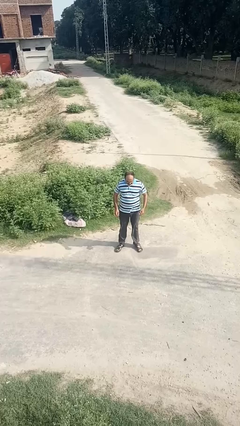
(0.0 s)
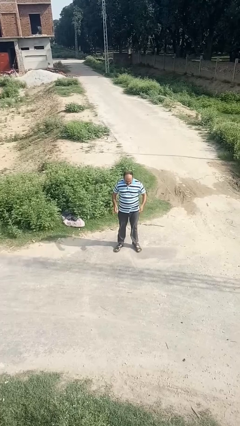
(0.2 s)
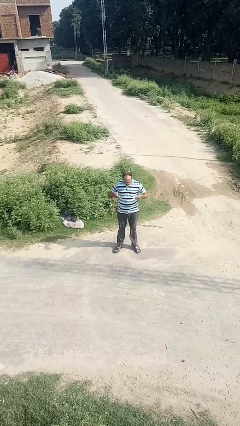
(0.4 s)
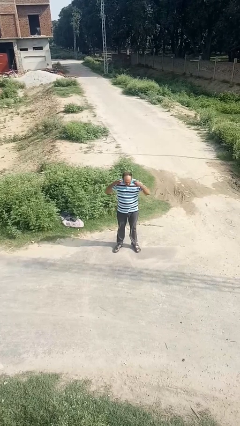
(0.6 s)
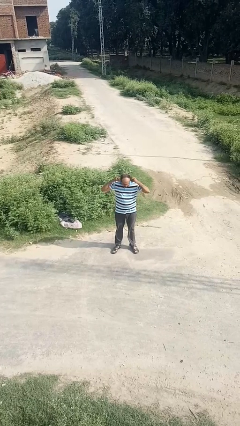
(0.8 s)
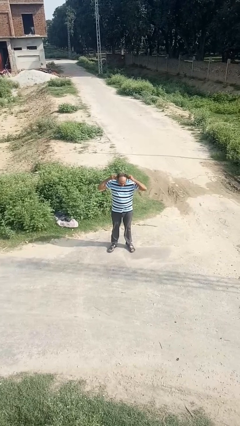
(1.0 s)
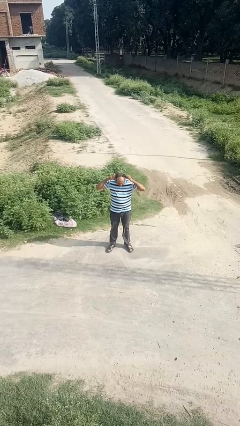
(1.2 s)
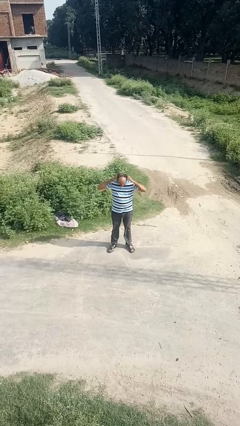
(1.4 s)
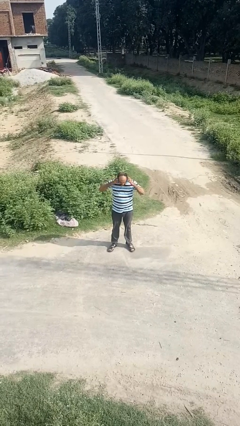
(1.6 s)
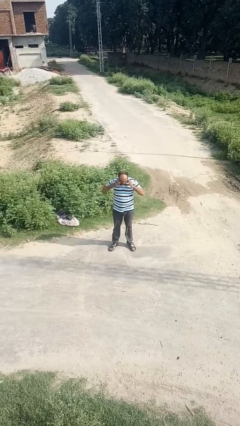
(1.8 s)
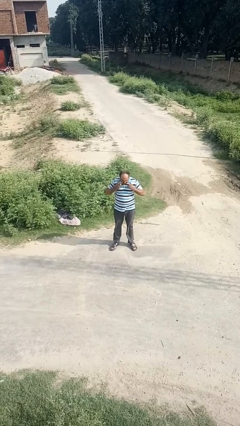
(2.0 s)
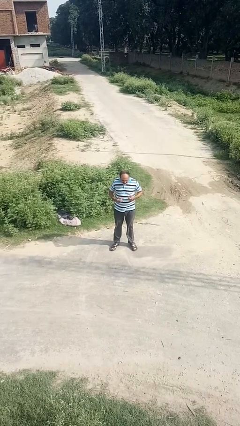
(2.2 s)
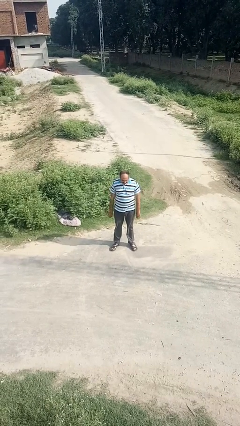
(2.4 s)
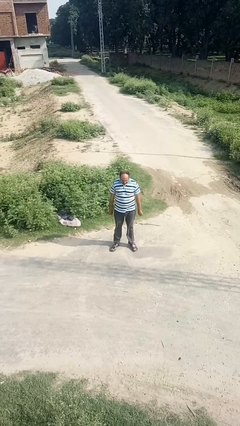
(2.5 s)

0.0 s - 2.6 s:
person puts on earrings

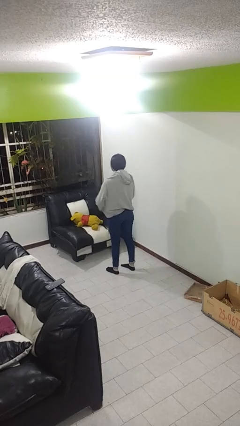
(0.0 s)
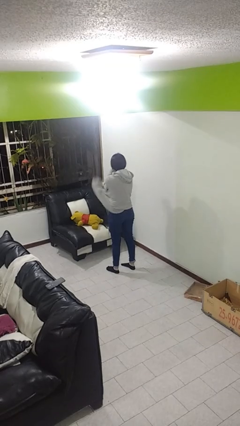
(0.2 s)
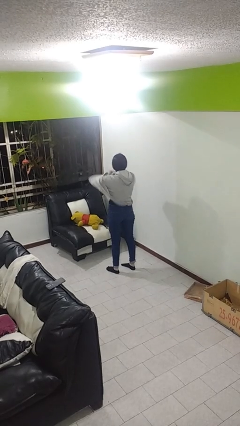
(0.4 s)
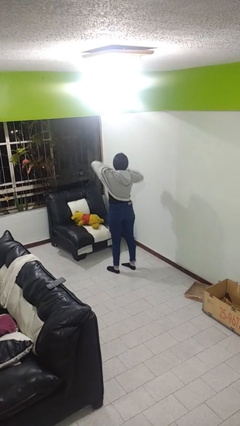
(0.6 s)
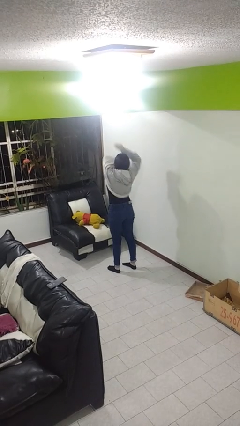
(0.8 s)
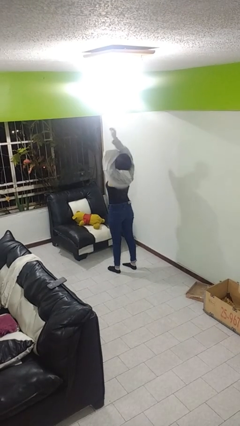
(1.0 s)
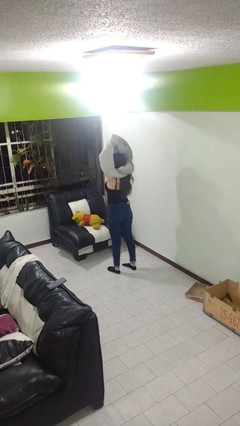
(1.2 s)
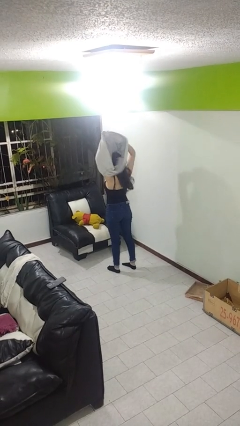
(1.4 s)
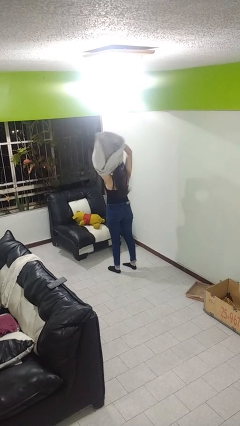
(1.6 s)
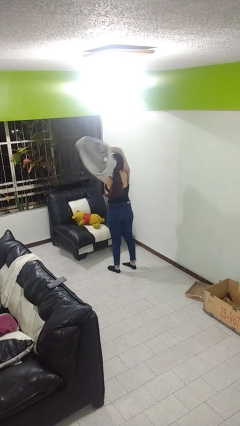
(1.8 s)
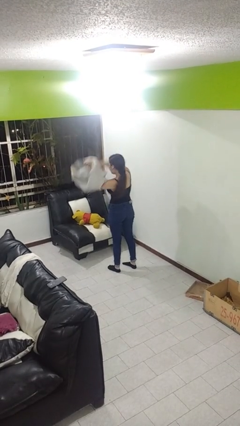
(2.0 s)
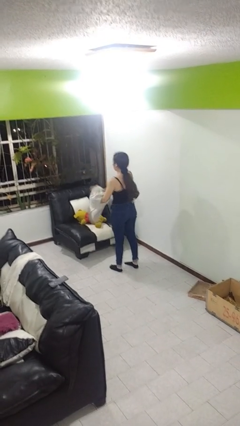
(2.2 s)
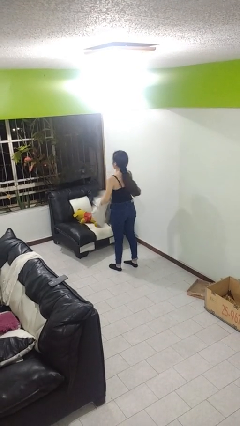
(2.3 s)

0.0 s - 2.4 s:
person takes off hoodie

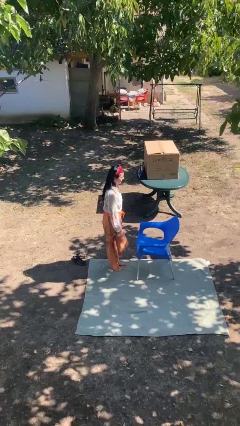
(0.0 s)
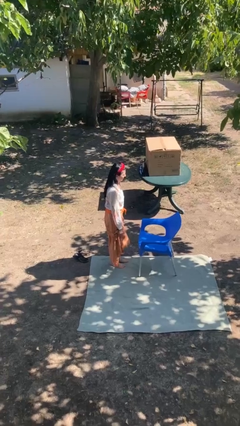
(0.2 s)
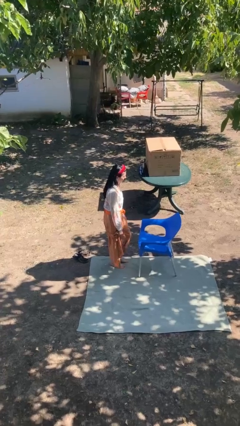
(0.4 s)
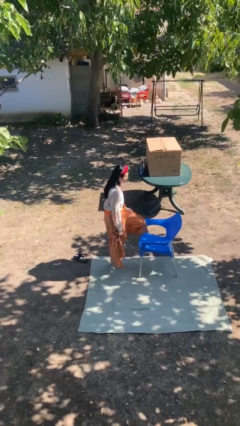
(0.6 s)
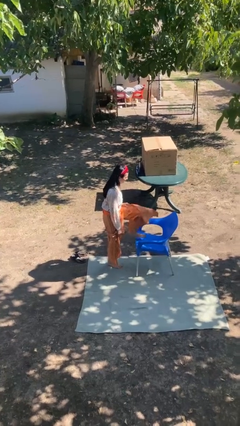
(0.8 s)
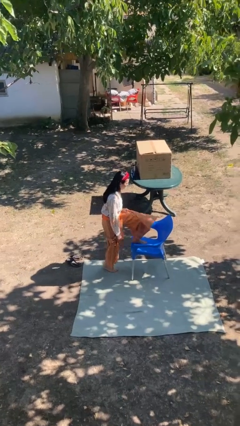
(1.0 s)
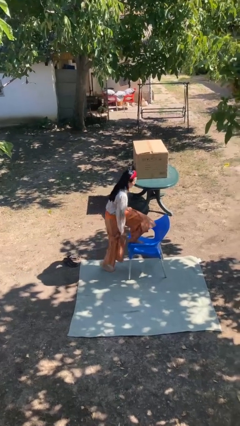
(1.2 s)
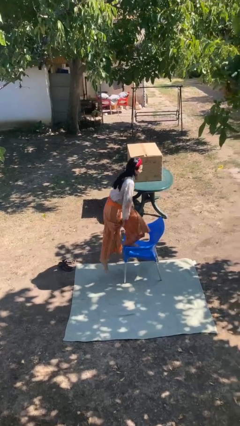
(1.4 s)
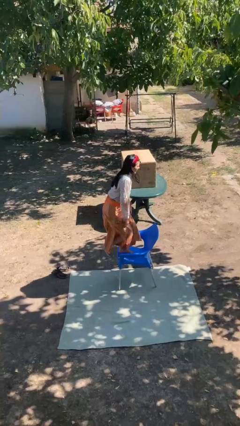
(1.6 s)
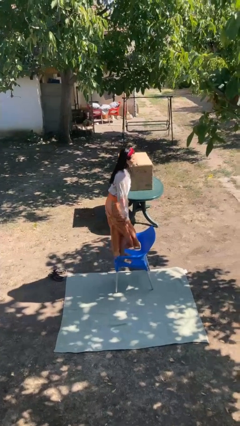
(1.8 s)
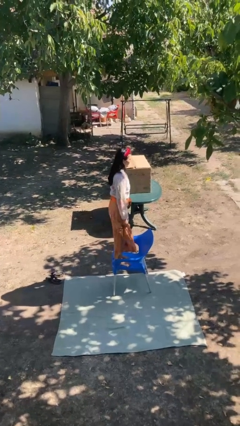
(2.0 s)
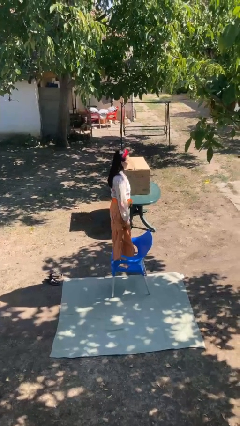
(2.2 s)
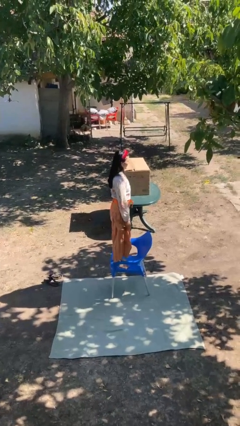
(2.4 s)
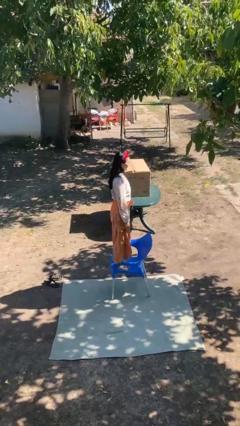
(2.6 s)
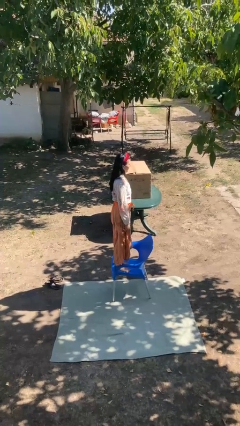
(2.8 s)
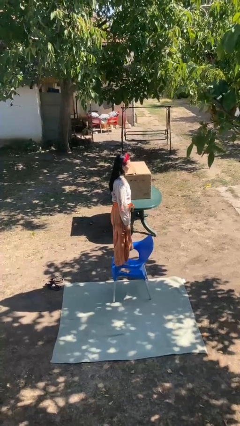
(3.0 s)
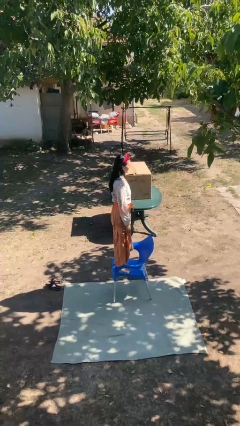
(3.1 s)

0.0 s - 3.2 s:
person climbs on chair

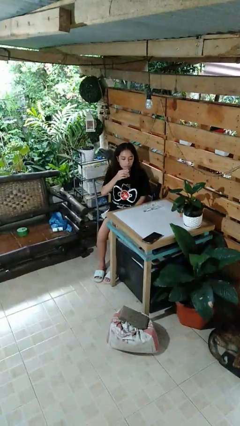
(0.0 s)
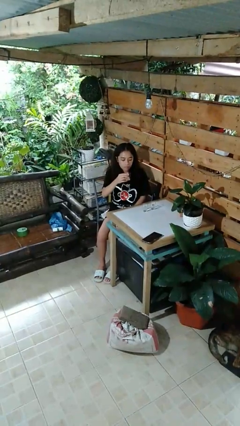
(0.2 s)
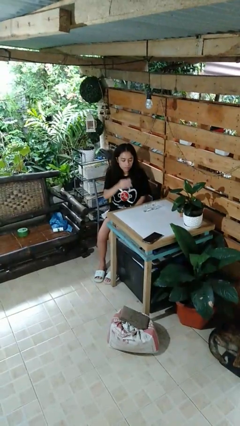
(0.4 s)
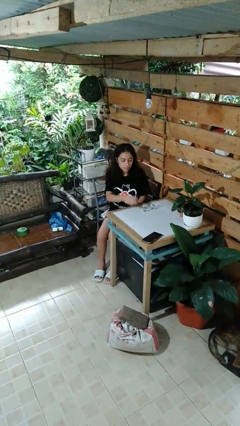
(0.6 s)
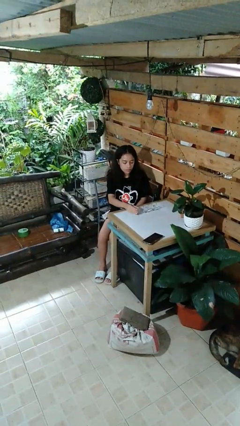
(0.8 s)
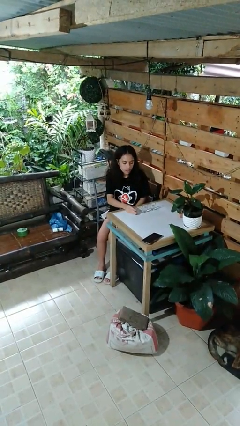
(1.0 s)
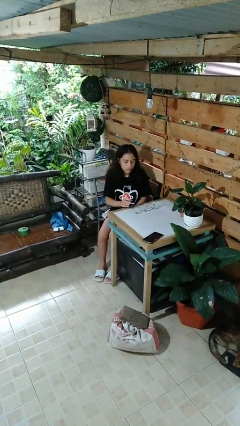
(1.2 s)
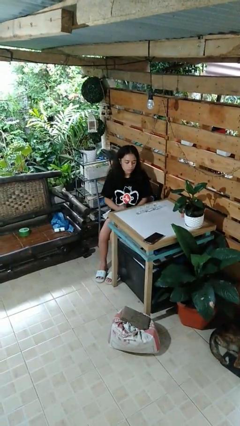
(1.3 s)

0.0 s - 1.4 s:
person puts down object on table

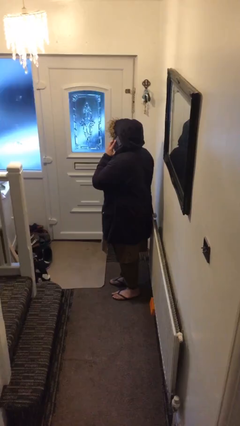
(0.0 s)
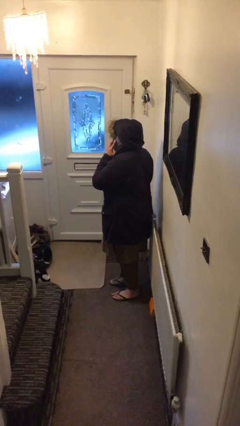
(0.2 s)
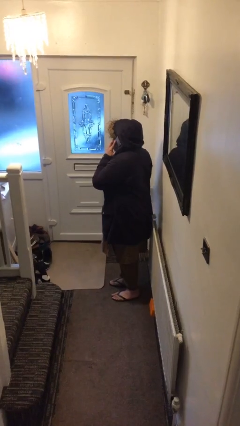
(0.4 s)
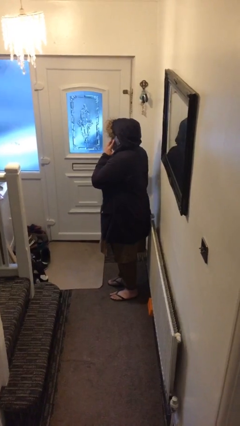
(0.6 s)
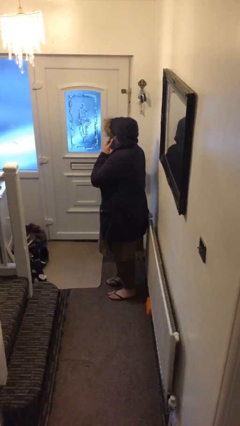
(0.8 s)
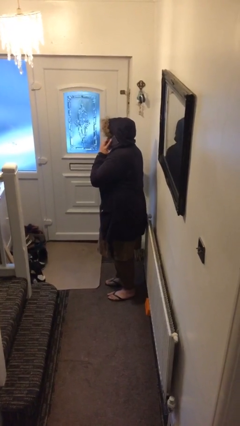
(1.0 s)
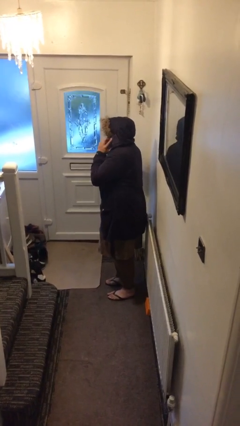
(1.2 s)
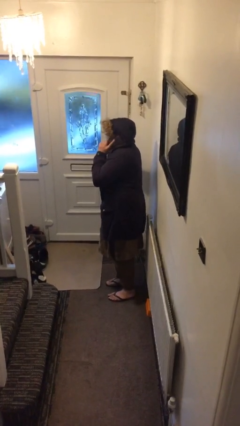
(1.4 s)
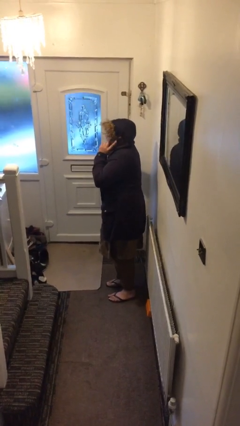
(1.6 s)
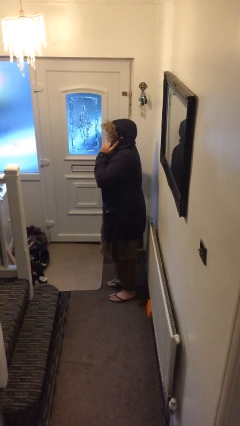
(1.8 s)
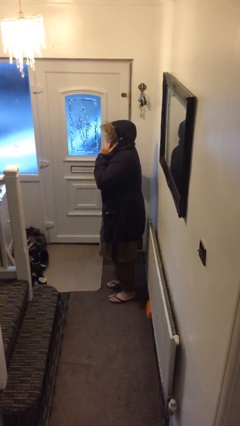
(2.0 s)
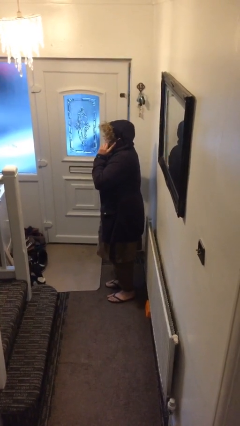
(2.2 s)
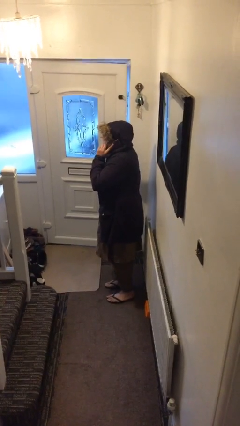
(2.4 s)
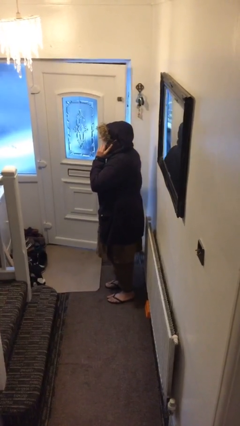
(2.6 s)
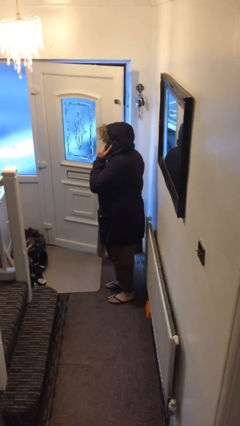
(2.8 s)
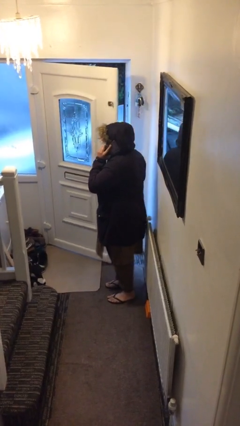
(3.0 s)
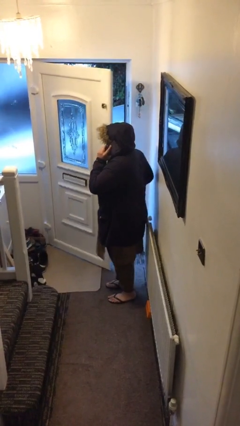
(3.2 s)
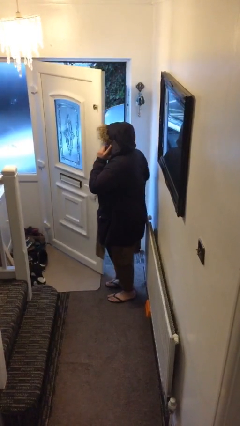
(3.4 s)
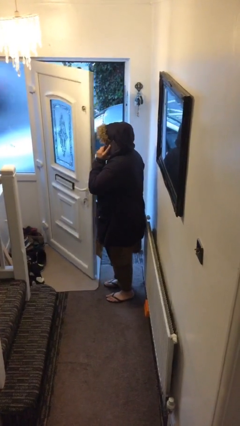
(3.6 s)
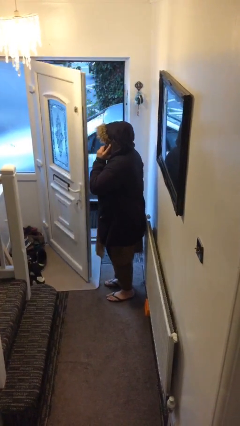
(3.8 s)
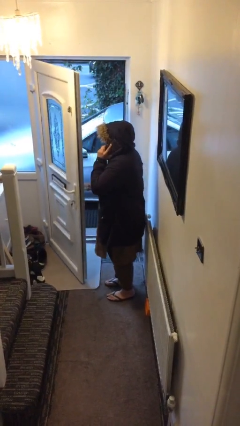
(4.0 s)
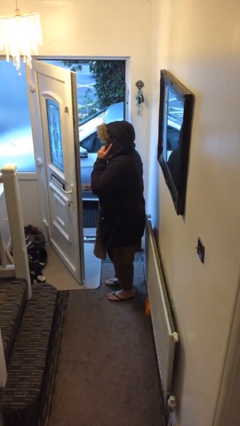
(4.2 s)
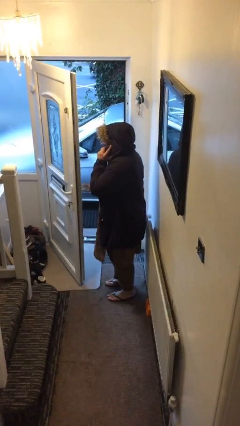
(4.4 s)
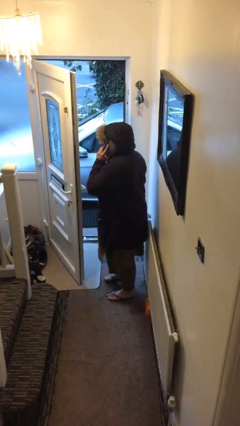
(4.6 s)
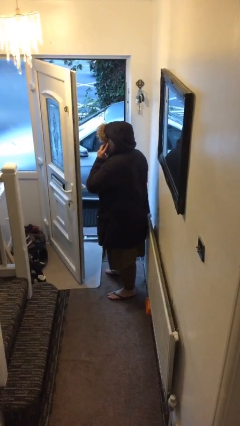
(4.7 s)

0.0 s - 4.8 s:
person opens facility door

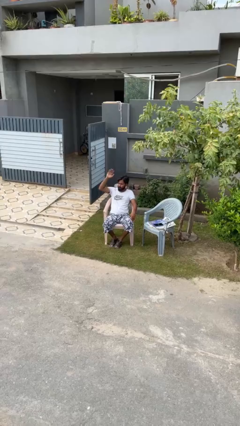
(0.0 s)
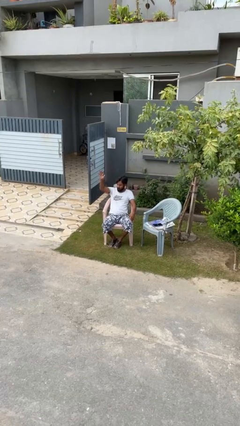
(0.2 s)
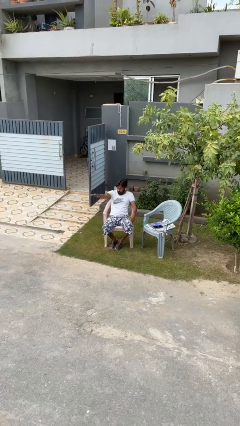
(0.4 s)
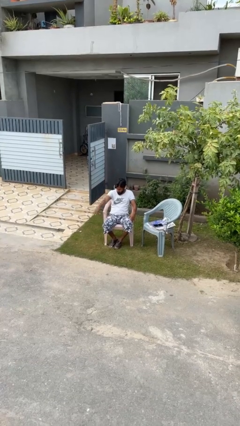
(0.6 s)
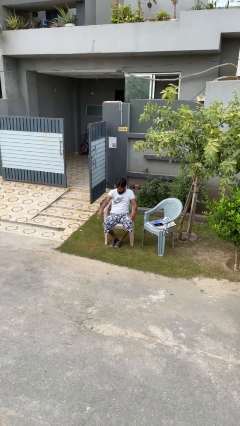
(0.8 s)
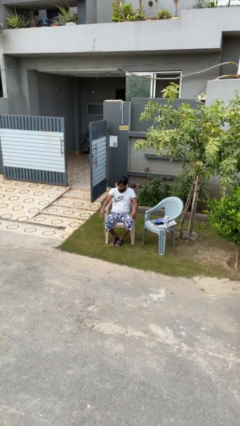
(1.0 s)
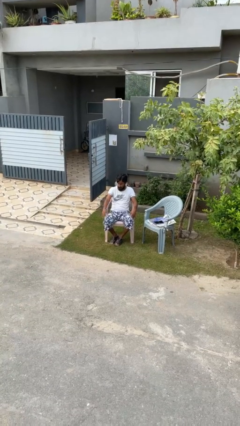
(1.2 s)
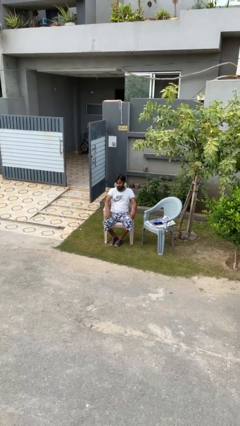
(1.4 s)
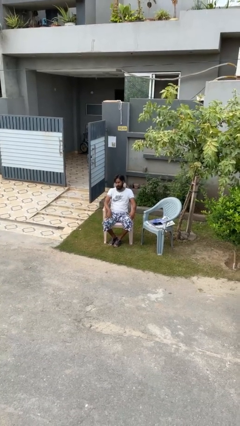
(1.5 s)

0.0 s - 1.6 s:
person gestures swipe down

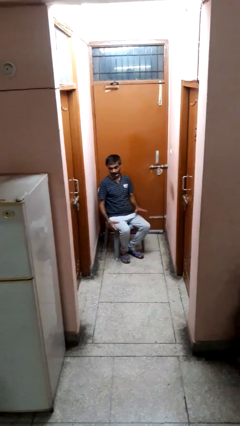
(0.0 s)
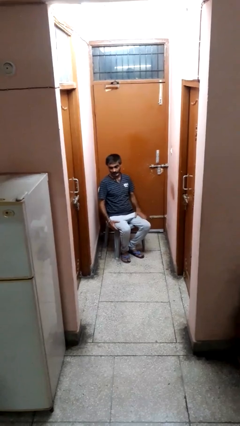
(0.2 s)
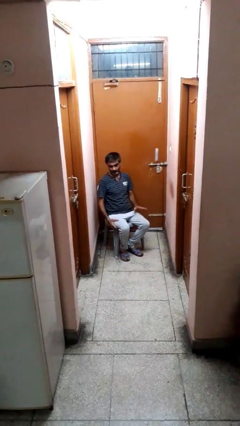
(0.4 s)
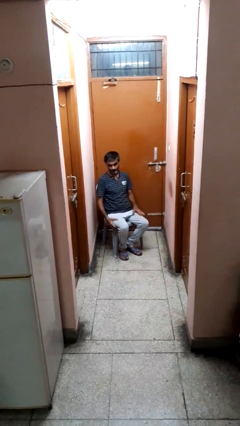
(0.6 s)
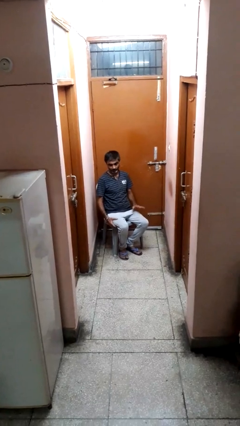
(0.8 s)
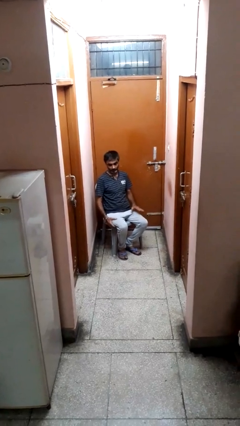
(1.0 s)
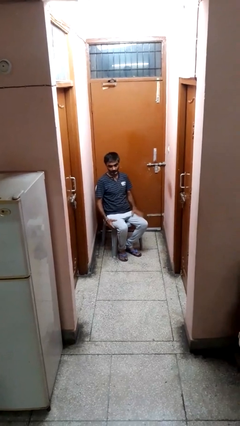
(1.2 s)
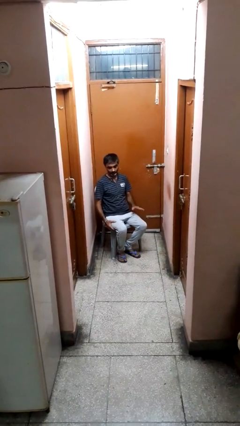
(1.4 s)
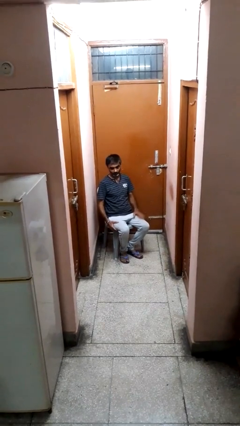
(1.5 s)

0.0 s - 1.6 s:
person slaps hands on thighs
